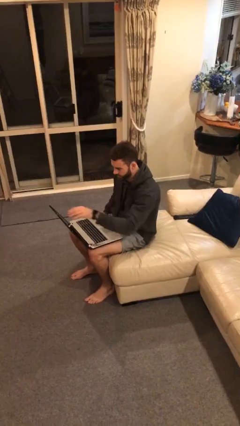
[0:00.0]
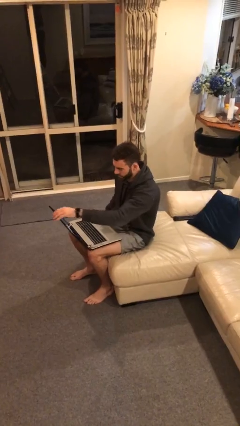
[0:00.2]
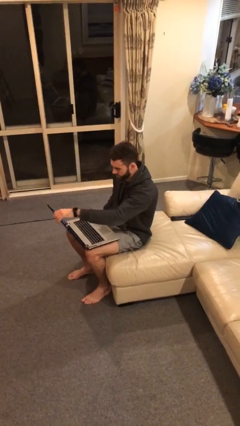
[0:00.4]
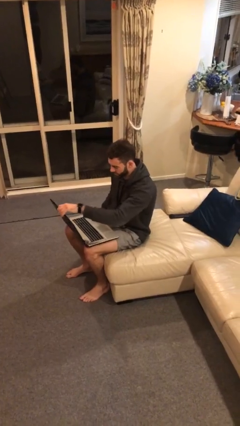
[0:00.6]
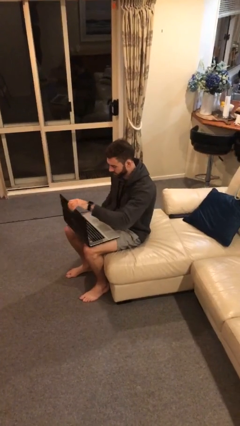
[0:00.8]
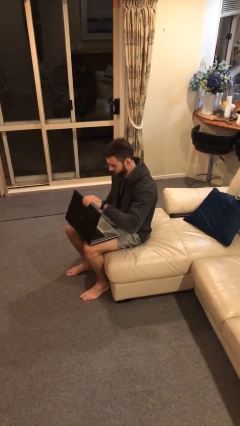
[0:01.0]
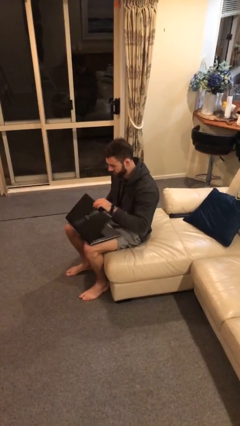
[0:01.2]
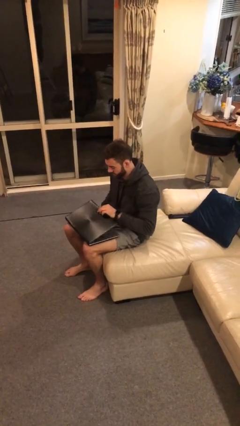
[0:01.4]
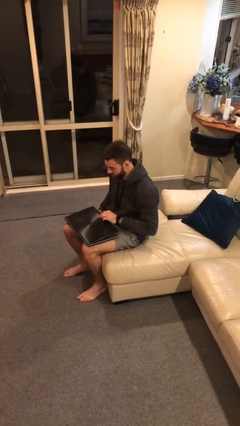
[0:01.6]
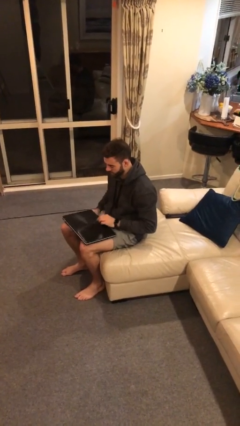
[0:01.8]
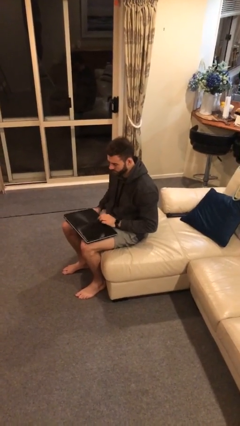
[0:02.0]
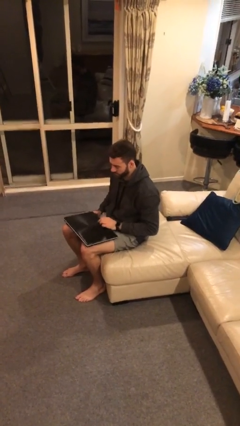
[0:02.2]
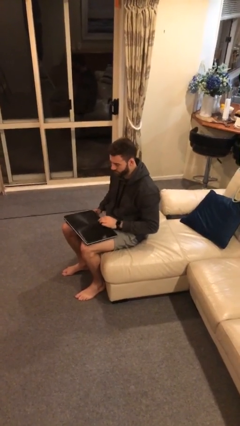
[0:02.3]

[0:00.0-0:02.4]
person closes laptop

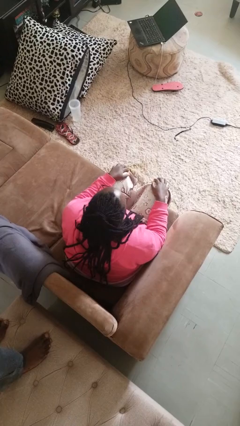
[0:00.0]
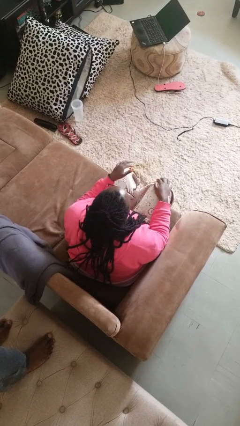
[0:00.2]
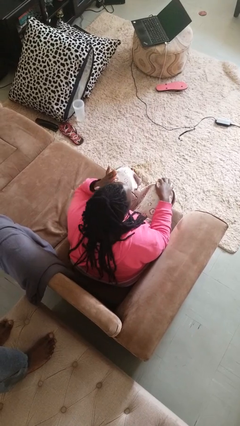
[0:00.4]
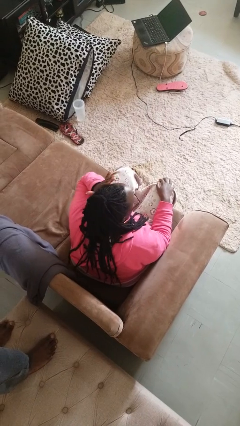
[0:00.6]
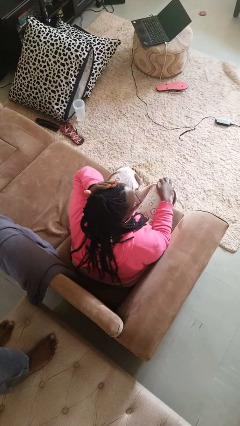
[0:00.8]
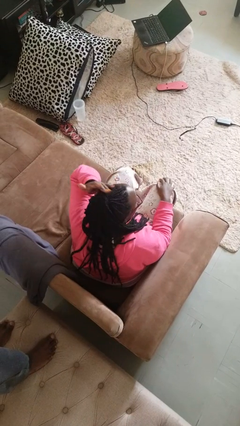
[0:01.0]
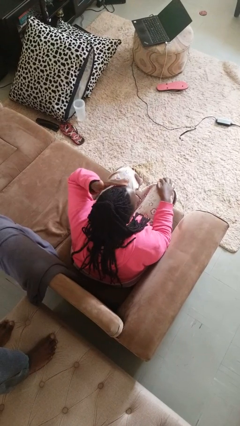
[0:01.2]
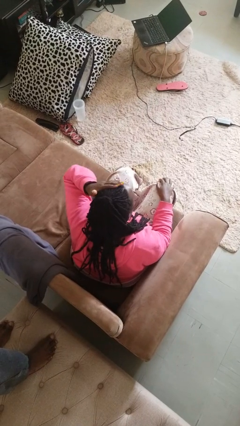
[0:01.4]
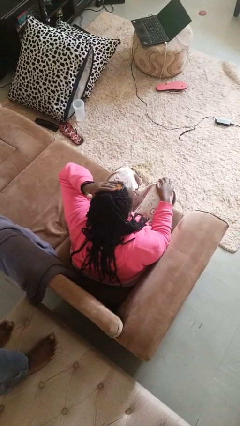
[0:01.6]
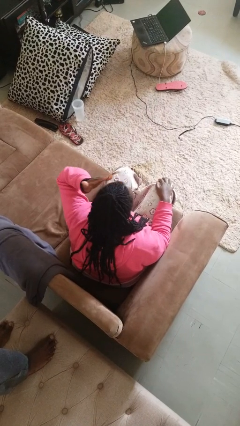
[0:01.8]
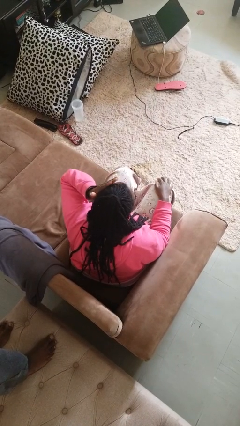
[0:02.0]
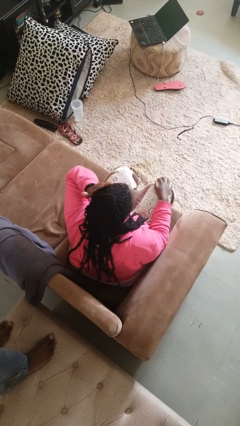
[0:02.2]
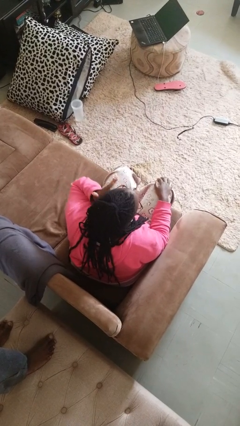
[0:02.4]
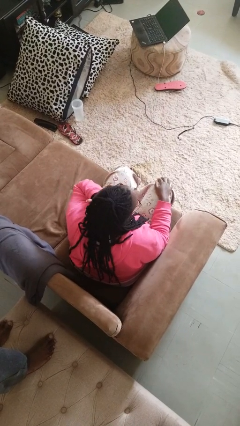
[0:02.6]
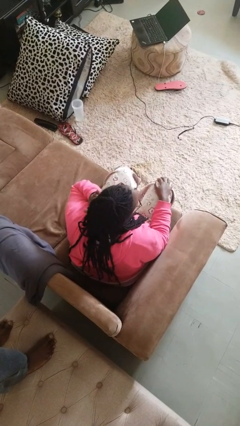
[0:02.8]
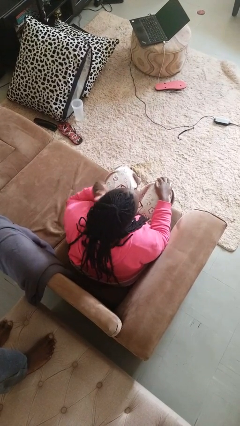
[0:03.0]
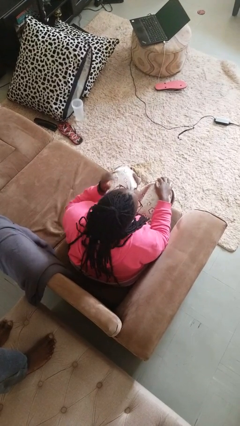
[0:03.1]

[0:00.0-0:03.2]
person strokes hair

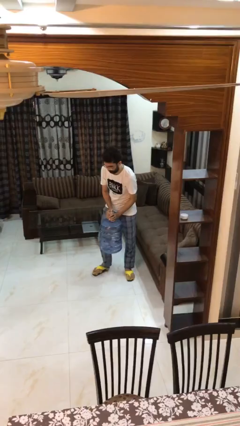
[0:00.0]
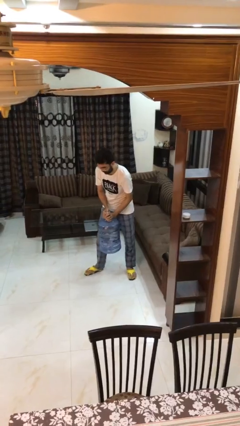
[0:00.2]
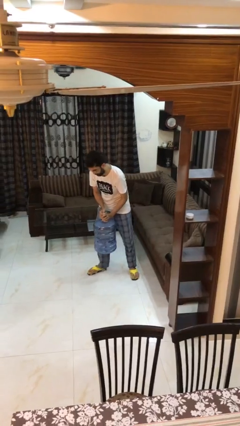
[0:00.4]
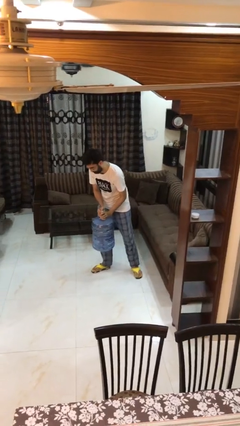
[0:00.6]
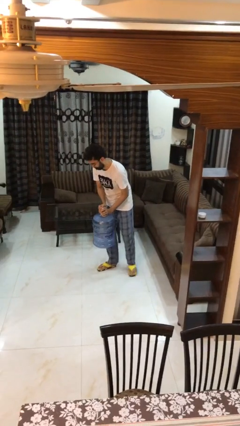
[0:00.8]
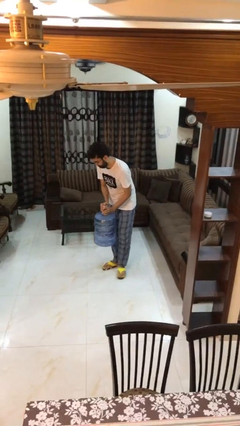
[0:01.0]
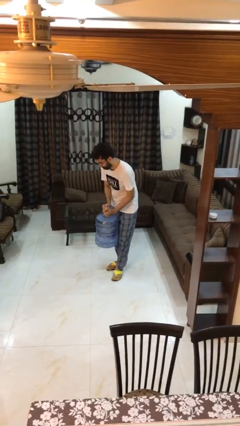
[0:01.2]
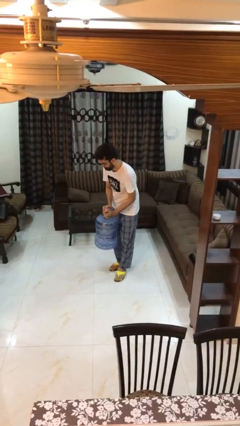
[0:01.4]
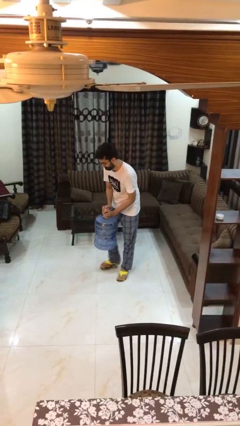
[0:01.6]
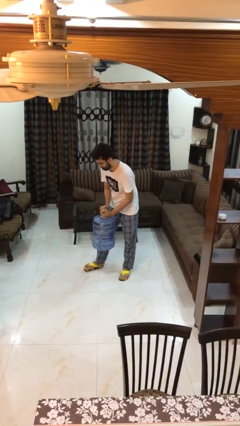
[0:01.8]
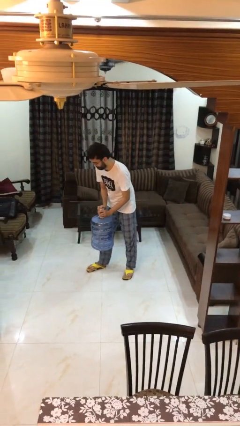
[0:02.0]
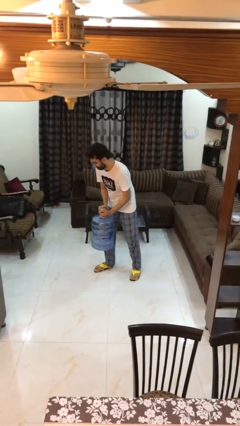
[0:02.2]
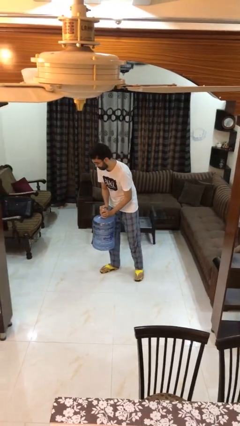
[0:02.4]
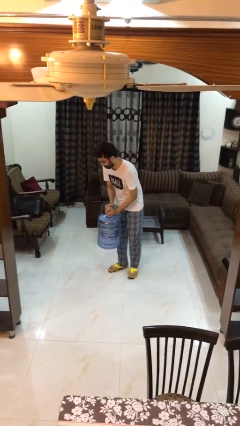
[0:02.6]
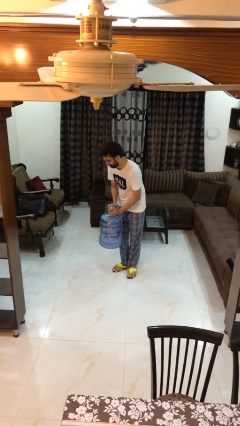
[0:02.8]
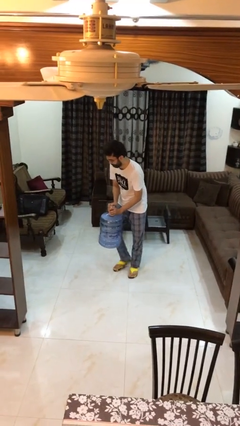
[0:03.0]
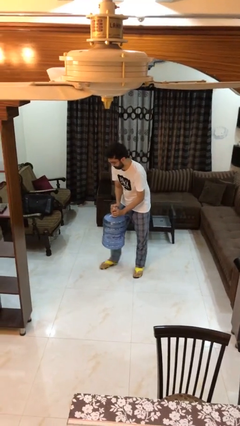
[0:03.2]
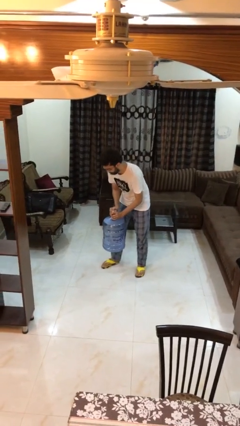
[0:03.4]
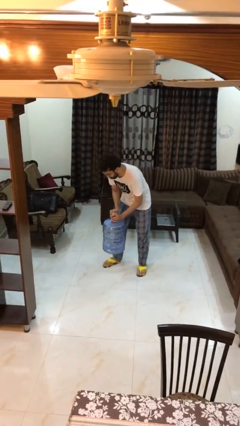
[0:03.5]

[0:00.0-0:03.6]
person carries heavy object

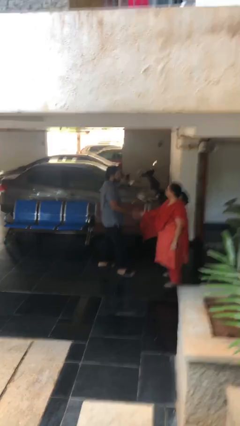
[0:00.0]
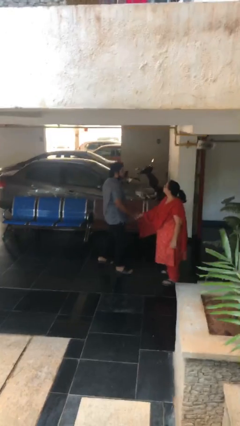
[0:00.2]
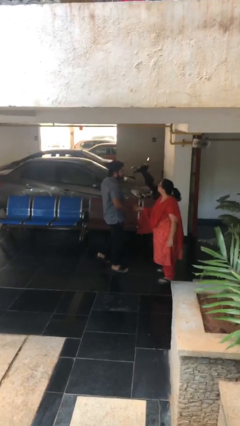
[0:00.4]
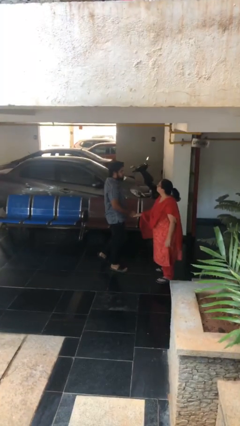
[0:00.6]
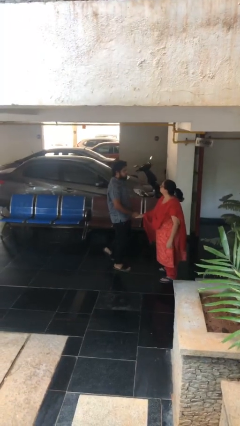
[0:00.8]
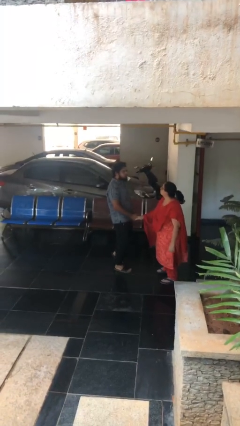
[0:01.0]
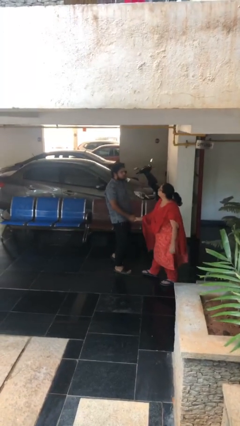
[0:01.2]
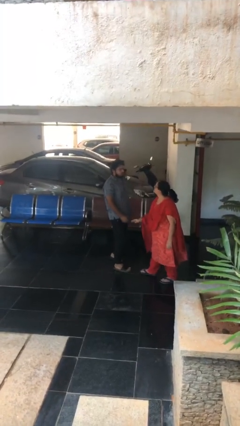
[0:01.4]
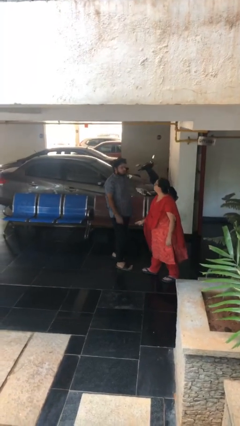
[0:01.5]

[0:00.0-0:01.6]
person shakes hand

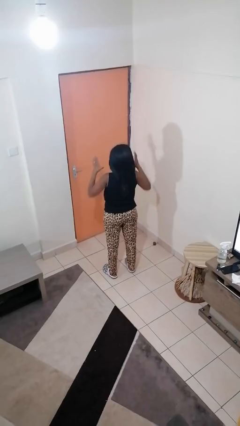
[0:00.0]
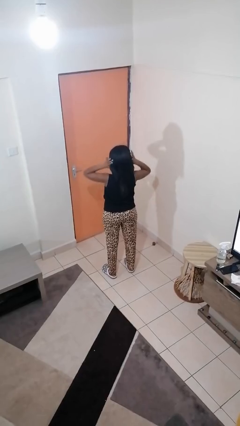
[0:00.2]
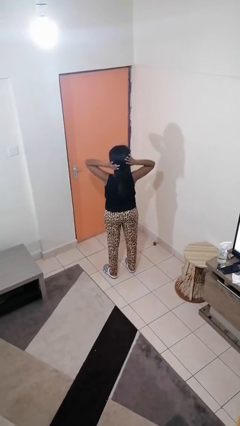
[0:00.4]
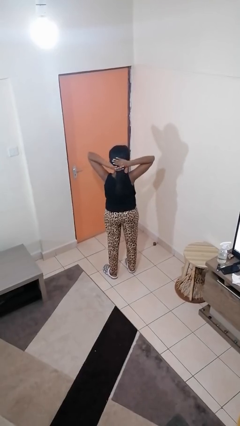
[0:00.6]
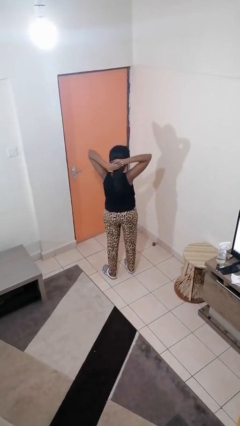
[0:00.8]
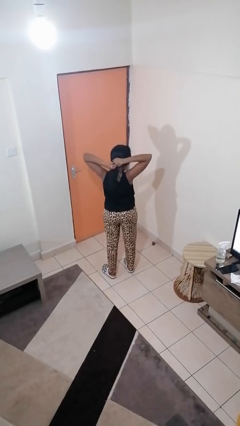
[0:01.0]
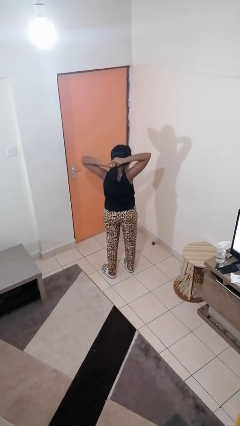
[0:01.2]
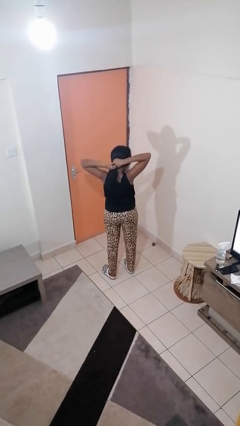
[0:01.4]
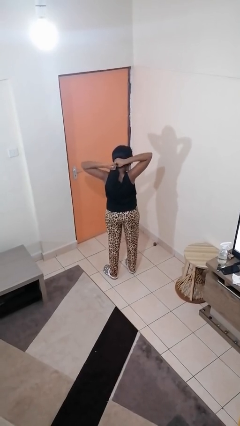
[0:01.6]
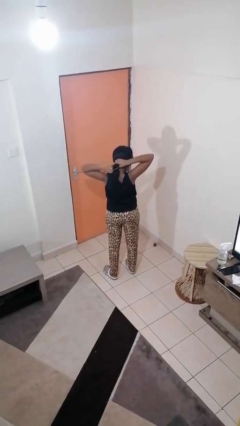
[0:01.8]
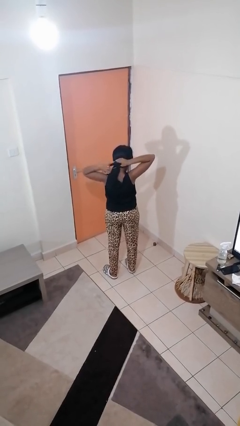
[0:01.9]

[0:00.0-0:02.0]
person puts hair in ponytail

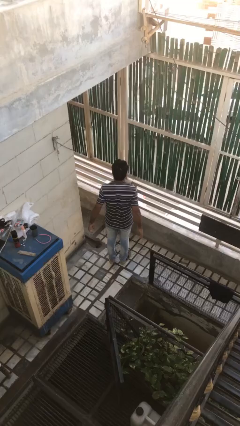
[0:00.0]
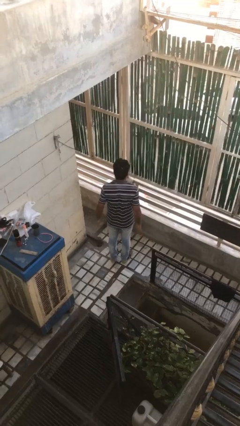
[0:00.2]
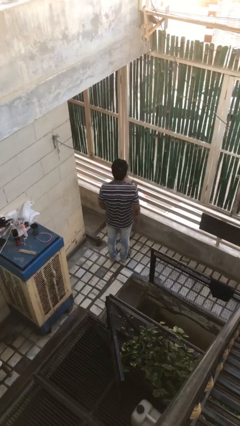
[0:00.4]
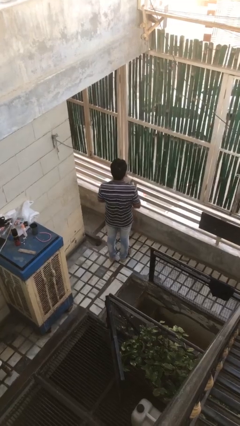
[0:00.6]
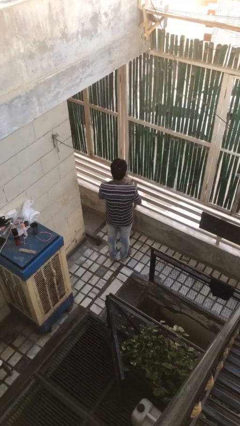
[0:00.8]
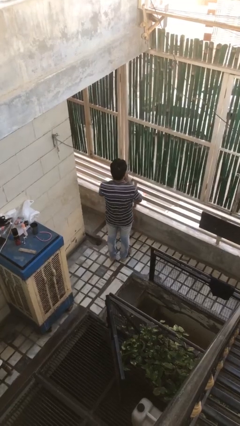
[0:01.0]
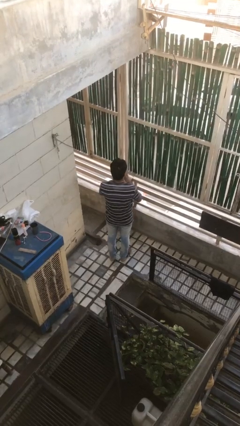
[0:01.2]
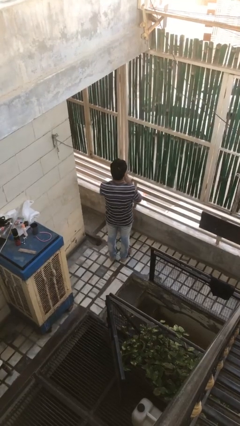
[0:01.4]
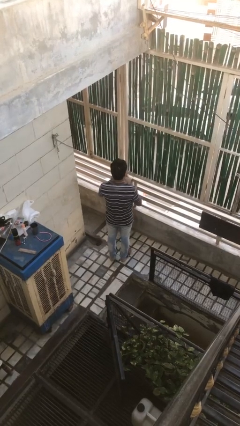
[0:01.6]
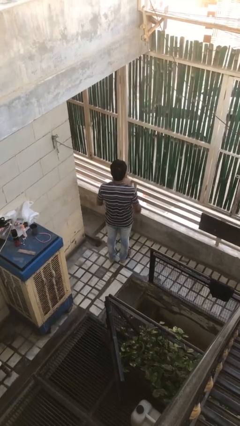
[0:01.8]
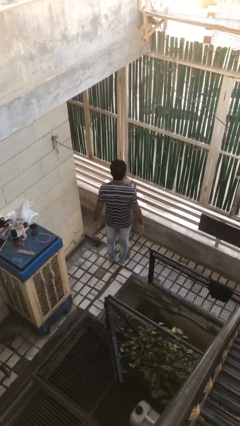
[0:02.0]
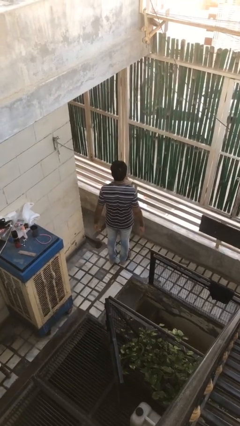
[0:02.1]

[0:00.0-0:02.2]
person takes off ring

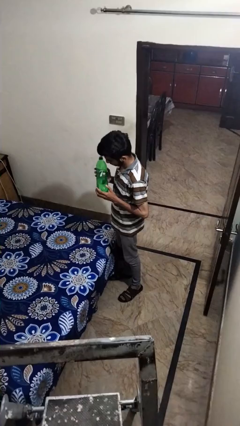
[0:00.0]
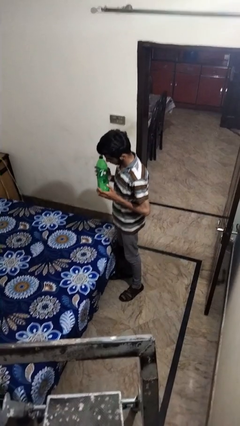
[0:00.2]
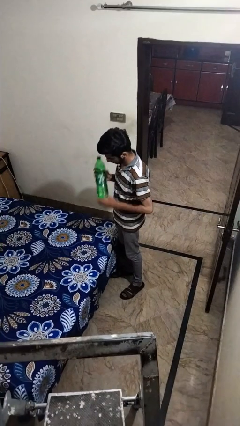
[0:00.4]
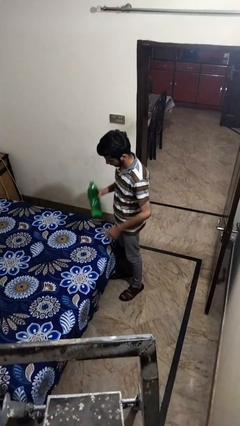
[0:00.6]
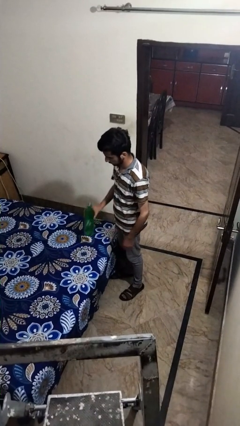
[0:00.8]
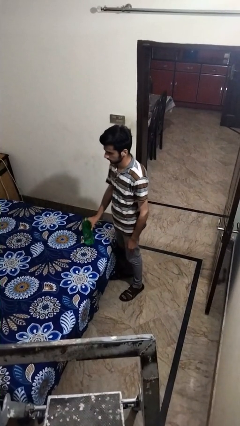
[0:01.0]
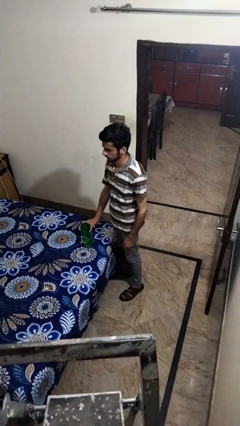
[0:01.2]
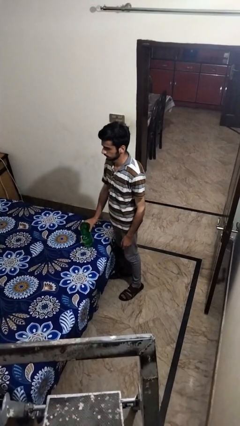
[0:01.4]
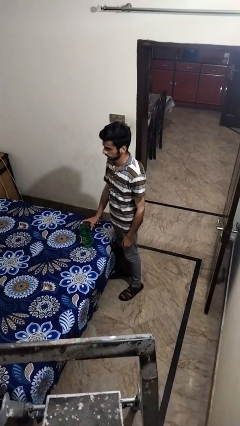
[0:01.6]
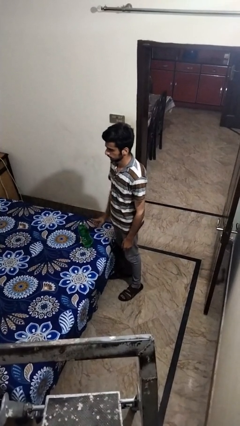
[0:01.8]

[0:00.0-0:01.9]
person puts down object on bed

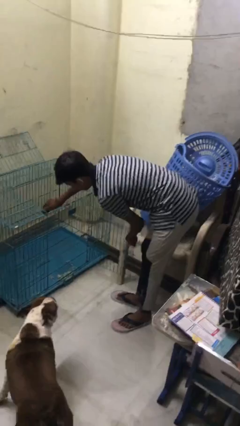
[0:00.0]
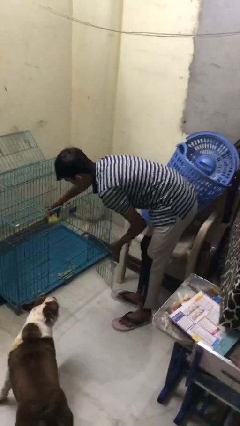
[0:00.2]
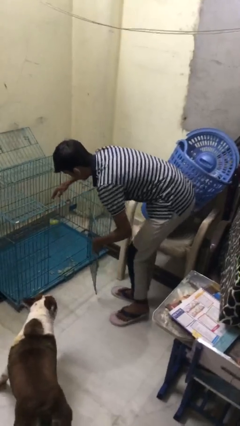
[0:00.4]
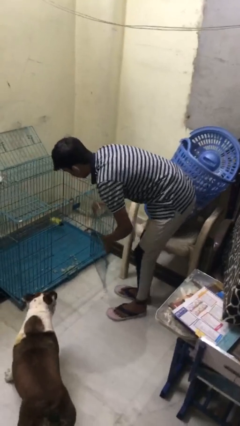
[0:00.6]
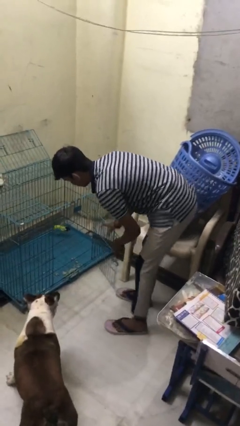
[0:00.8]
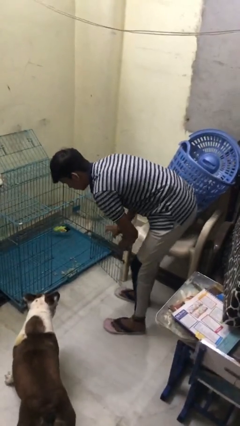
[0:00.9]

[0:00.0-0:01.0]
person crates dog
